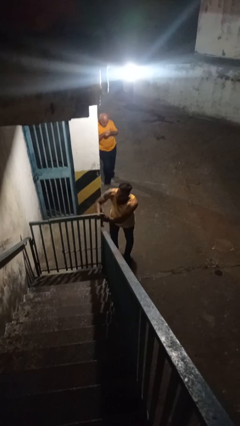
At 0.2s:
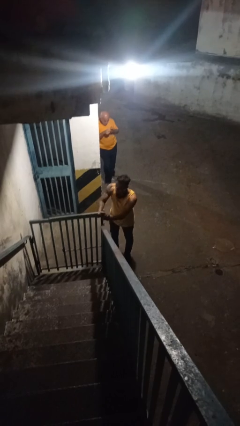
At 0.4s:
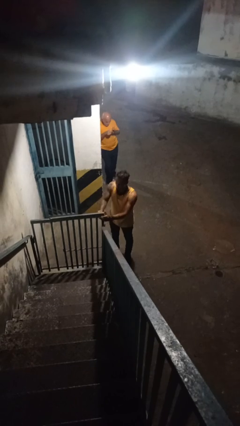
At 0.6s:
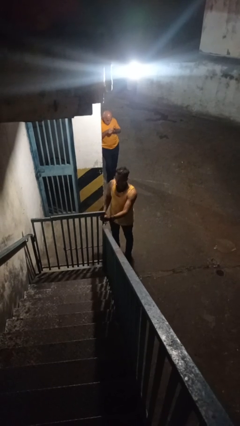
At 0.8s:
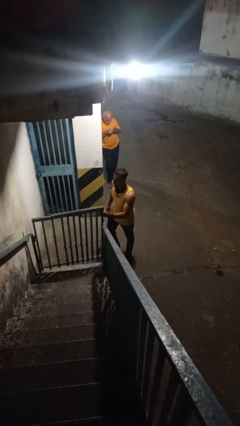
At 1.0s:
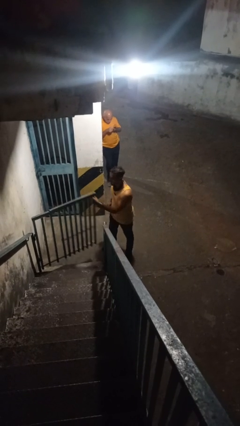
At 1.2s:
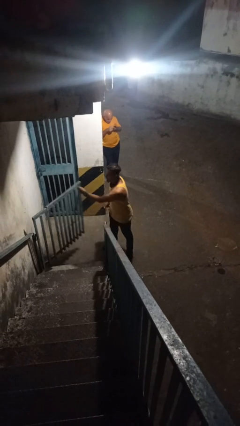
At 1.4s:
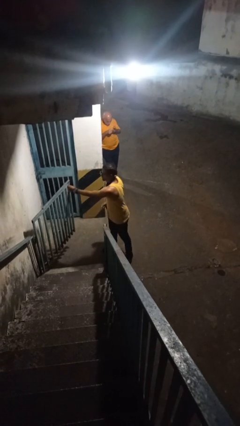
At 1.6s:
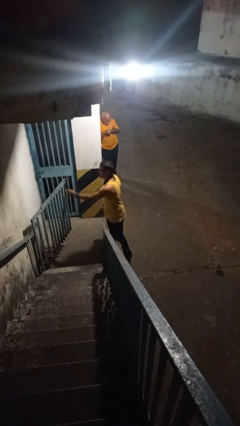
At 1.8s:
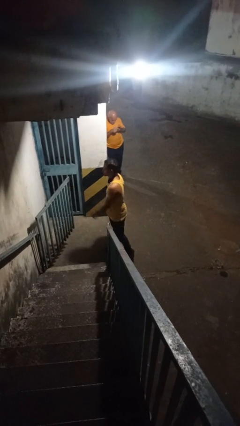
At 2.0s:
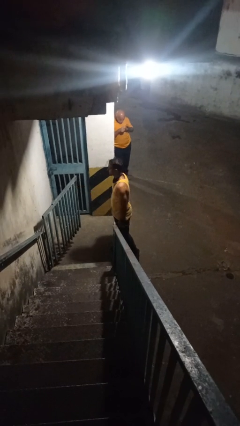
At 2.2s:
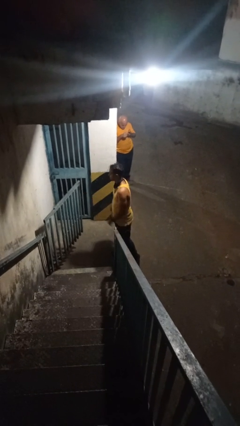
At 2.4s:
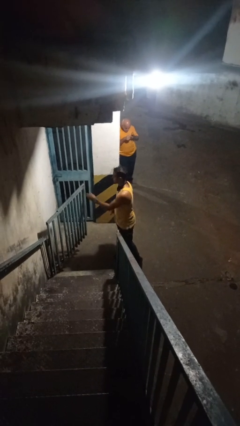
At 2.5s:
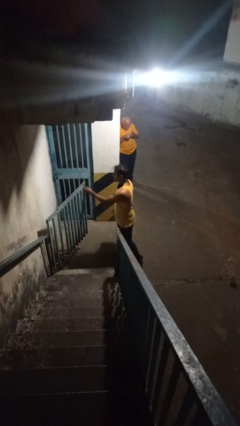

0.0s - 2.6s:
person opens facility door

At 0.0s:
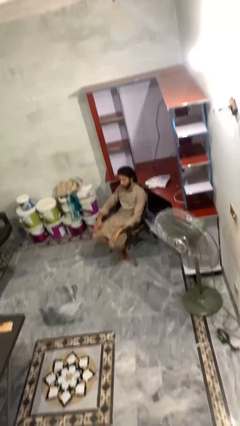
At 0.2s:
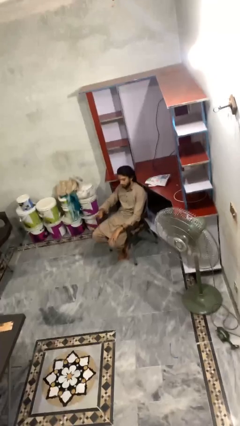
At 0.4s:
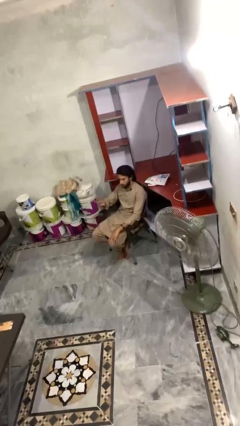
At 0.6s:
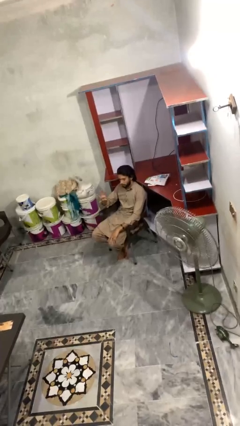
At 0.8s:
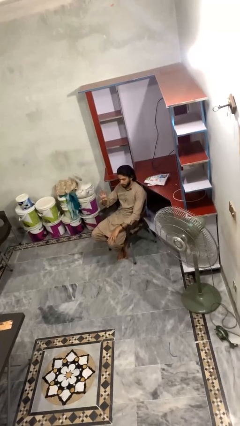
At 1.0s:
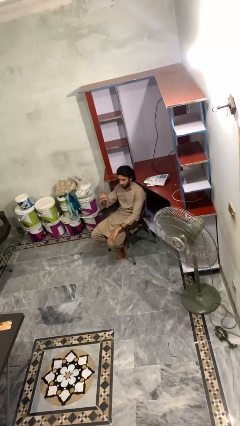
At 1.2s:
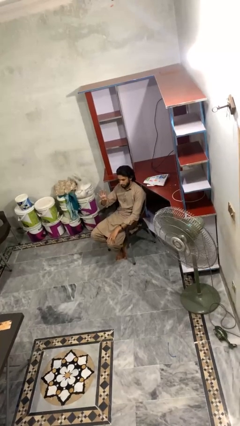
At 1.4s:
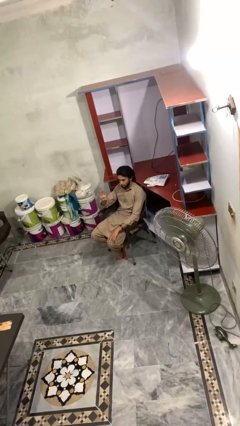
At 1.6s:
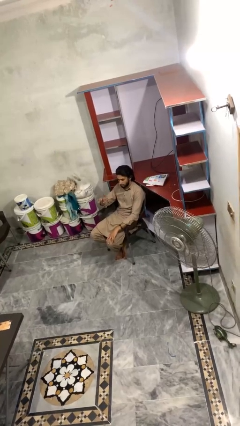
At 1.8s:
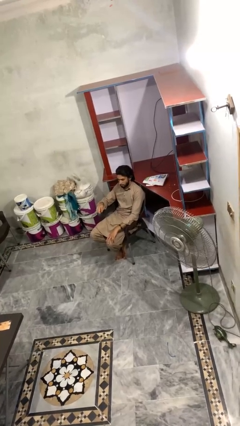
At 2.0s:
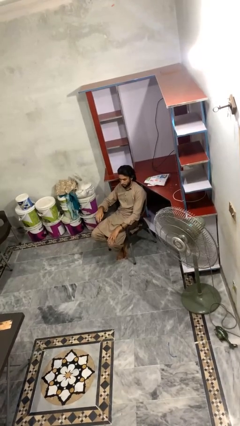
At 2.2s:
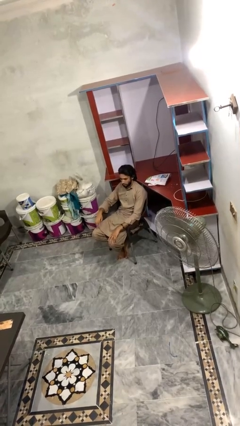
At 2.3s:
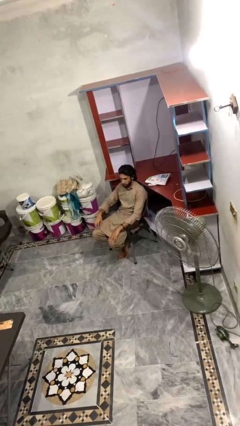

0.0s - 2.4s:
person gestures number four

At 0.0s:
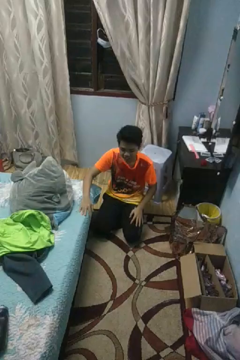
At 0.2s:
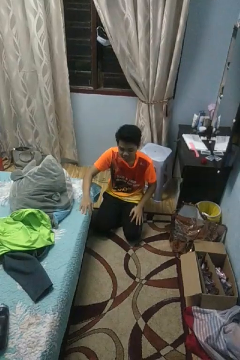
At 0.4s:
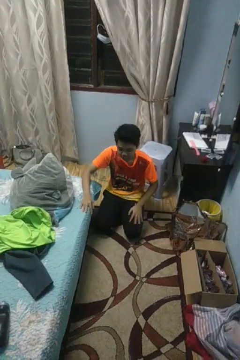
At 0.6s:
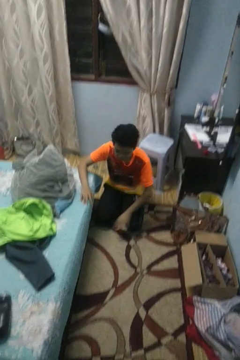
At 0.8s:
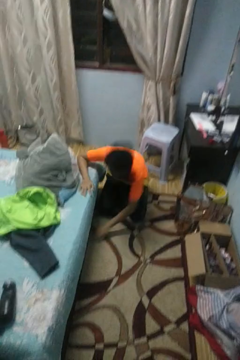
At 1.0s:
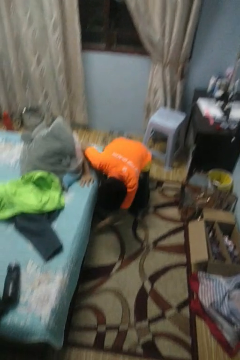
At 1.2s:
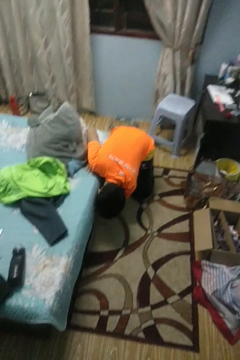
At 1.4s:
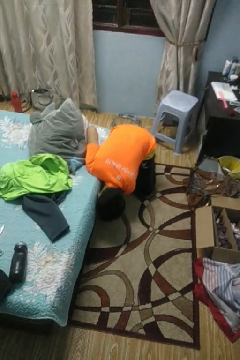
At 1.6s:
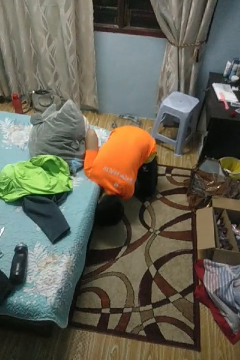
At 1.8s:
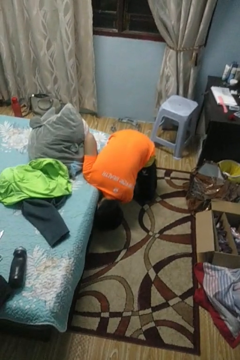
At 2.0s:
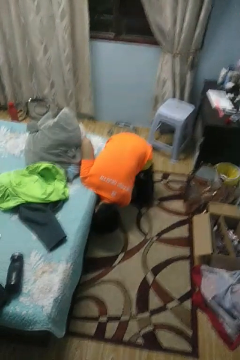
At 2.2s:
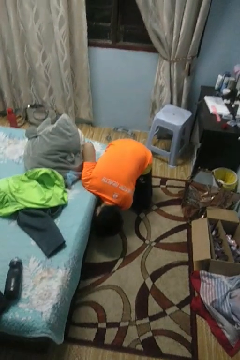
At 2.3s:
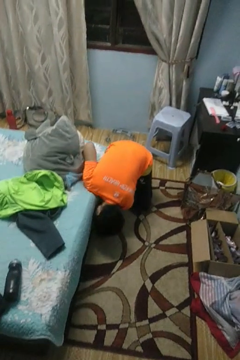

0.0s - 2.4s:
person searches under bed

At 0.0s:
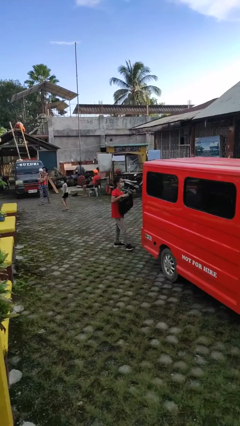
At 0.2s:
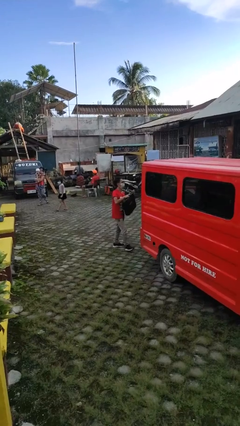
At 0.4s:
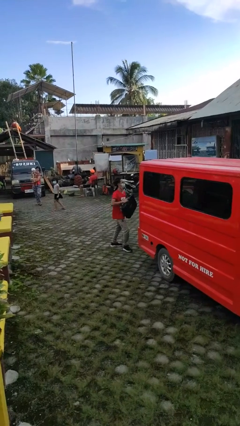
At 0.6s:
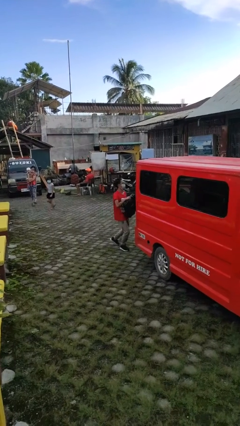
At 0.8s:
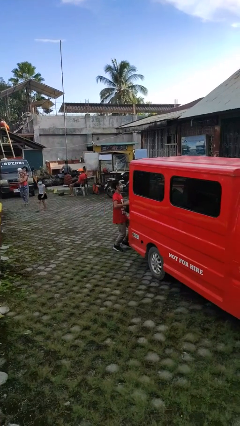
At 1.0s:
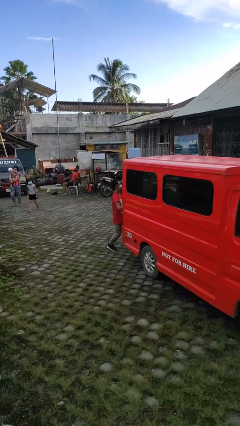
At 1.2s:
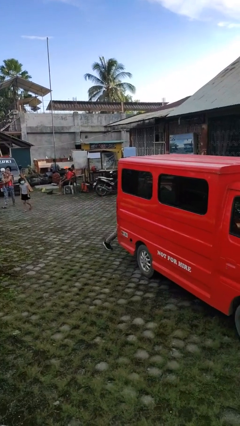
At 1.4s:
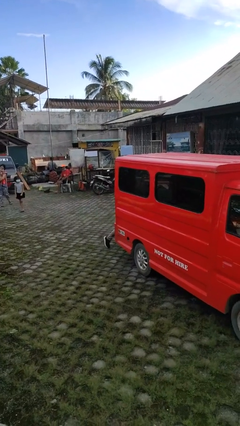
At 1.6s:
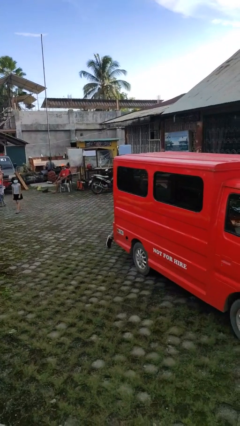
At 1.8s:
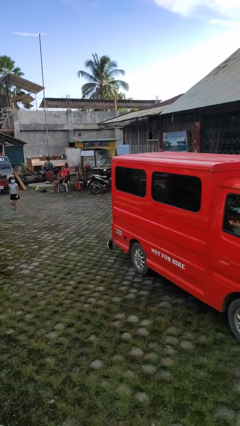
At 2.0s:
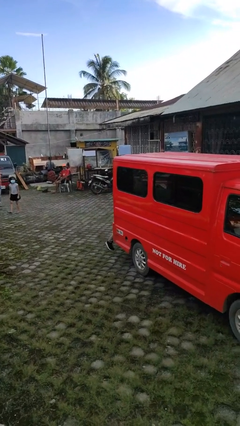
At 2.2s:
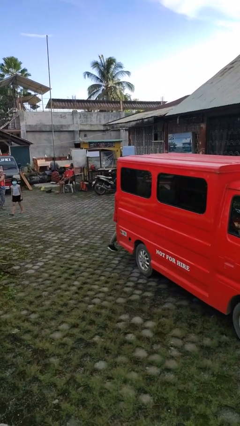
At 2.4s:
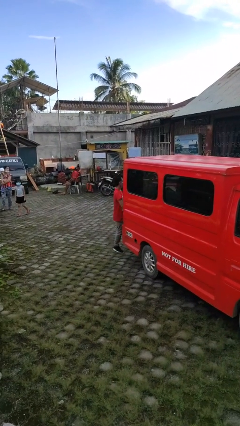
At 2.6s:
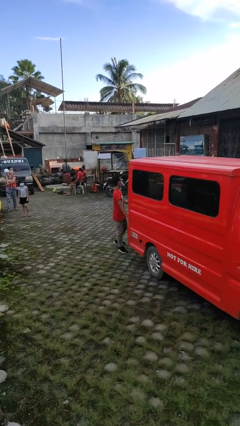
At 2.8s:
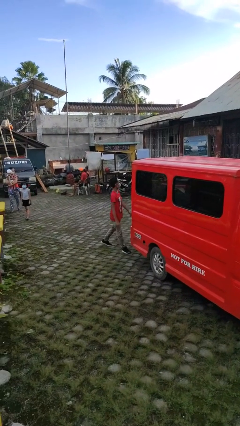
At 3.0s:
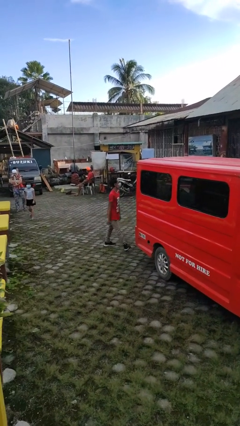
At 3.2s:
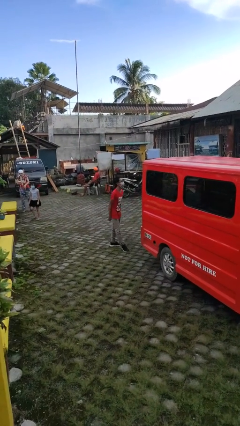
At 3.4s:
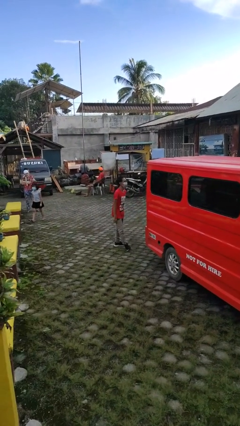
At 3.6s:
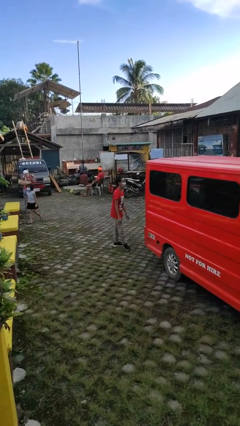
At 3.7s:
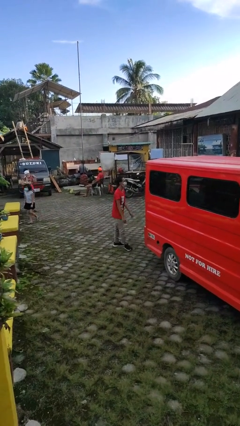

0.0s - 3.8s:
person loads car

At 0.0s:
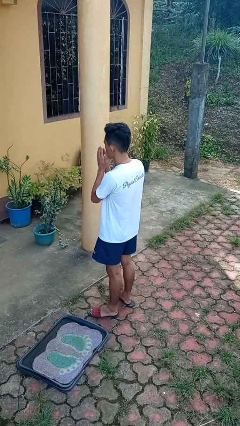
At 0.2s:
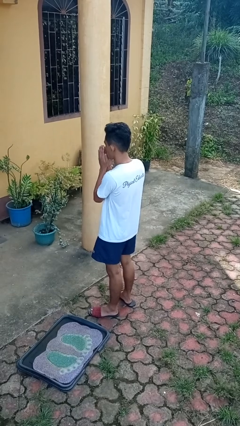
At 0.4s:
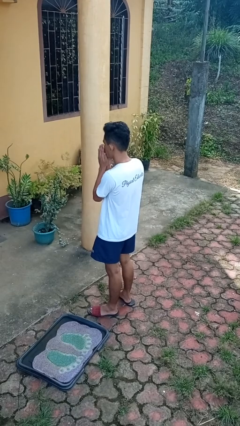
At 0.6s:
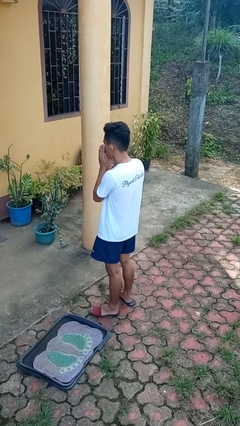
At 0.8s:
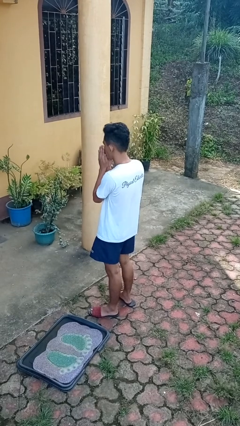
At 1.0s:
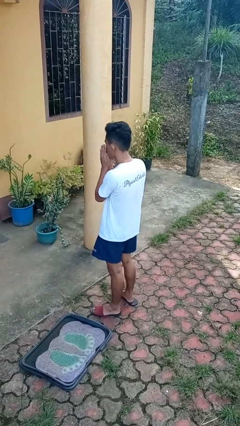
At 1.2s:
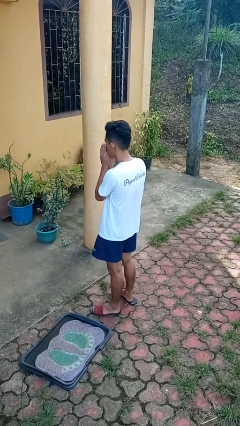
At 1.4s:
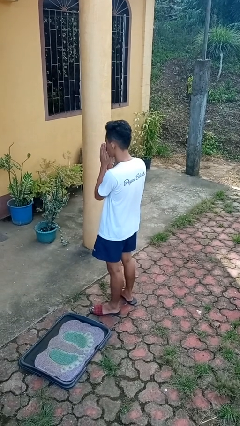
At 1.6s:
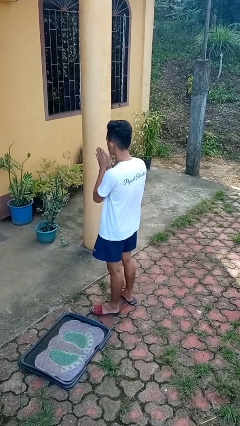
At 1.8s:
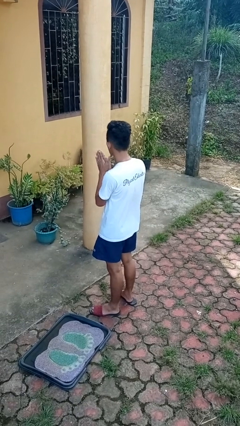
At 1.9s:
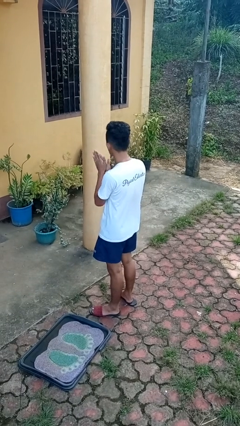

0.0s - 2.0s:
person blows into hands

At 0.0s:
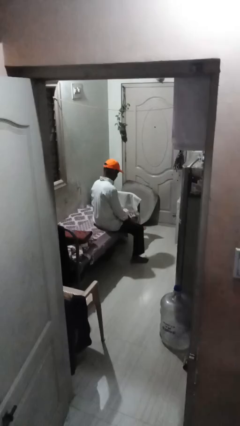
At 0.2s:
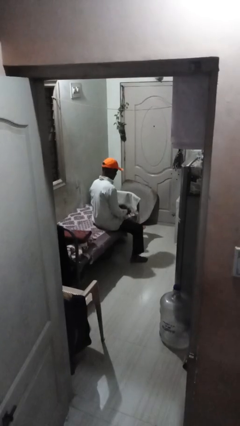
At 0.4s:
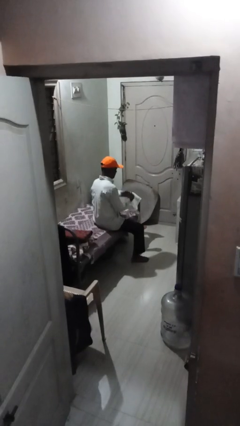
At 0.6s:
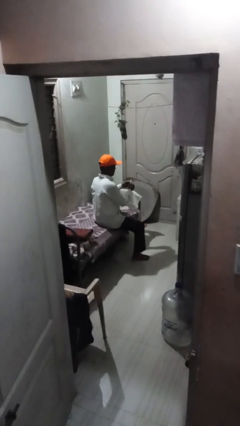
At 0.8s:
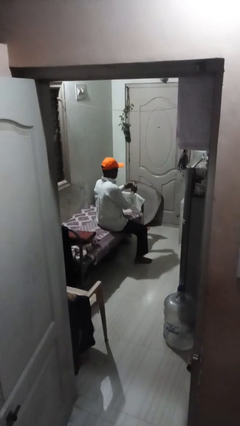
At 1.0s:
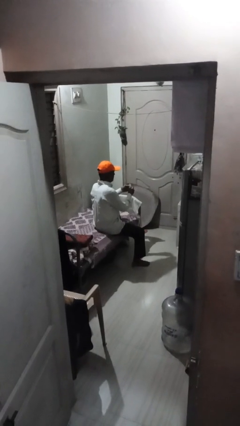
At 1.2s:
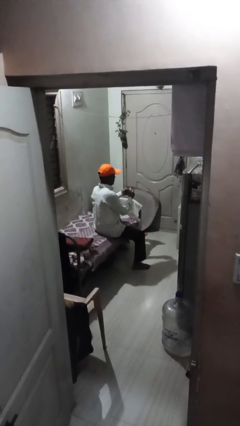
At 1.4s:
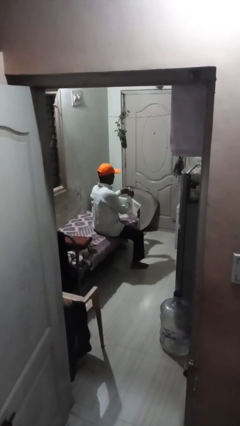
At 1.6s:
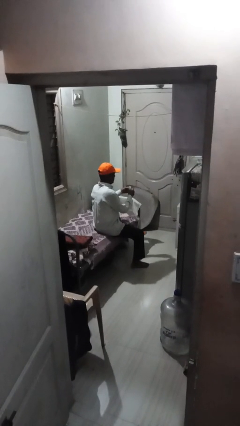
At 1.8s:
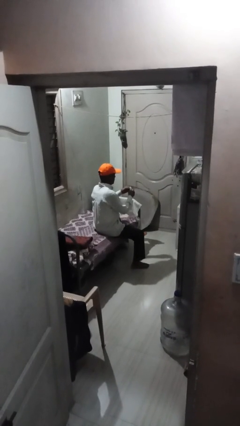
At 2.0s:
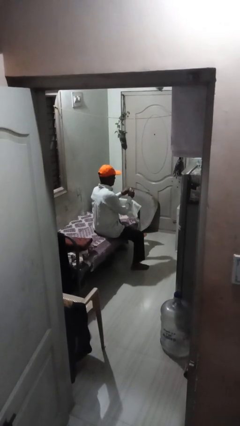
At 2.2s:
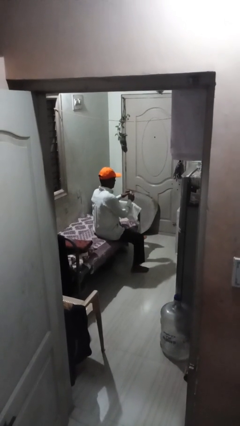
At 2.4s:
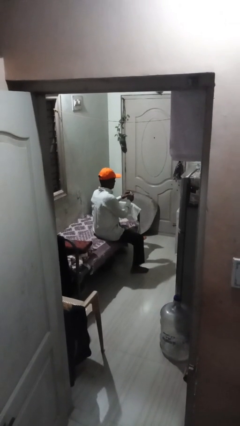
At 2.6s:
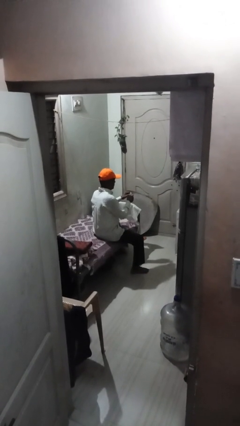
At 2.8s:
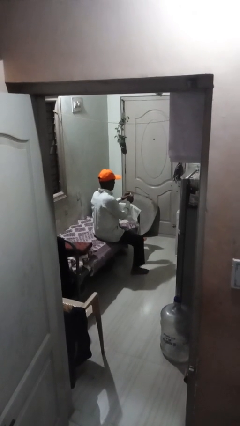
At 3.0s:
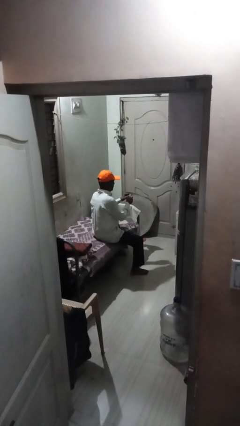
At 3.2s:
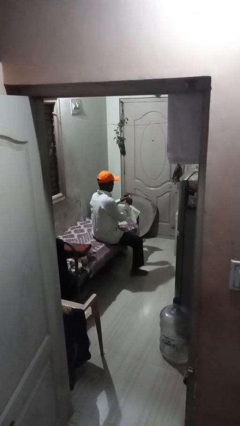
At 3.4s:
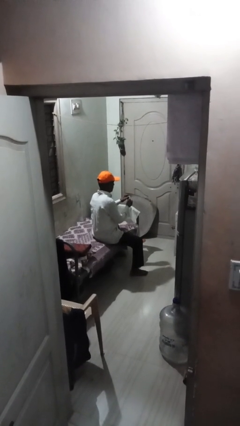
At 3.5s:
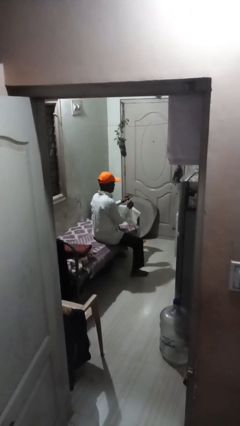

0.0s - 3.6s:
person files fingernails

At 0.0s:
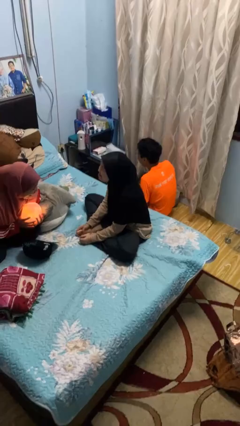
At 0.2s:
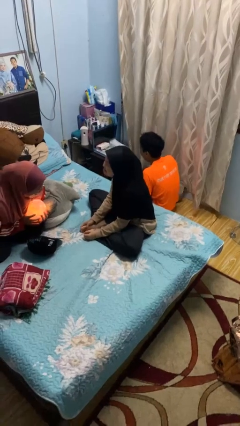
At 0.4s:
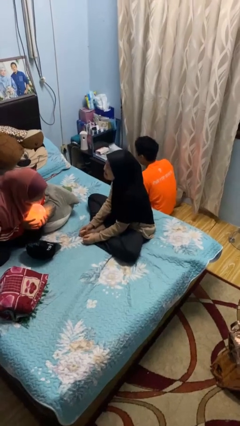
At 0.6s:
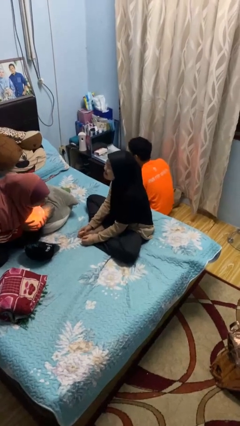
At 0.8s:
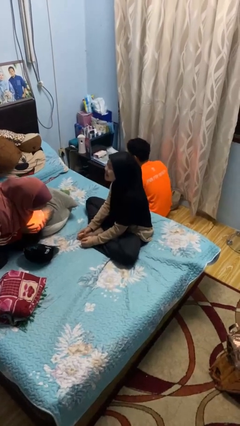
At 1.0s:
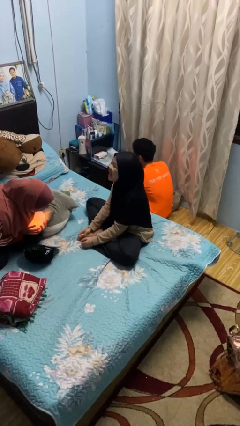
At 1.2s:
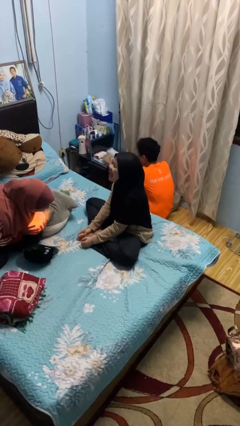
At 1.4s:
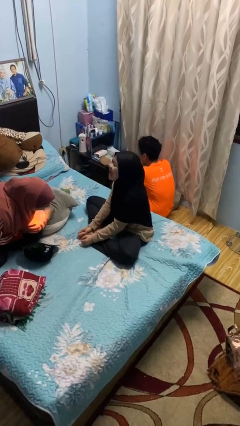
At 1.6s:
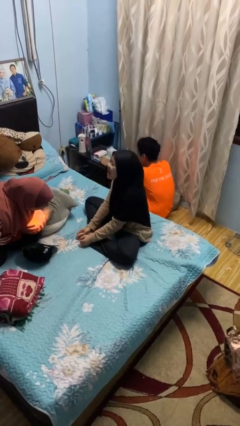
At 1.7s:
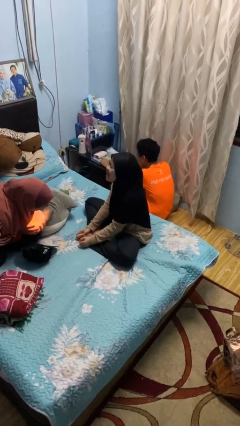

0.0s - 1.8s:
person laughs with person
